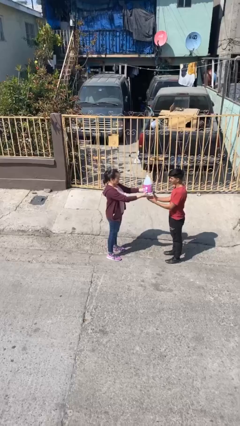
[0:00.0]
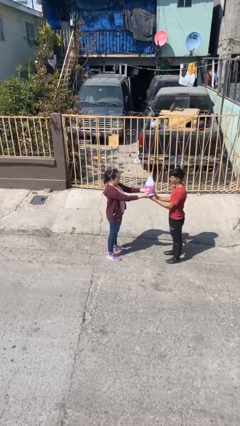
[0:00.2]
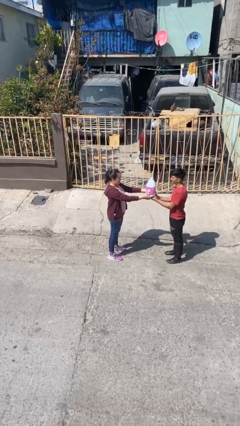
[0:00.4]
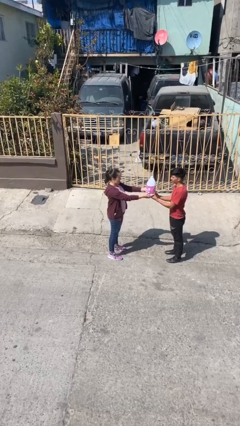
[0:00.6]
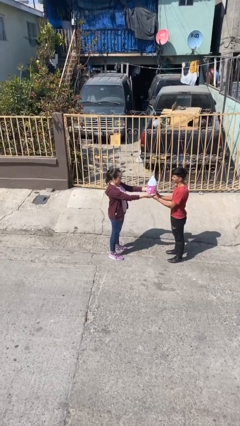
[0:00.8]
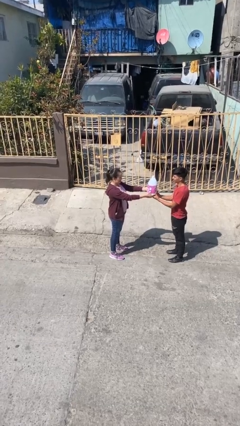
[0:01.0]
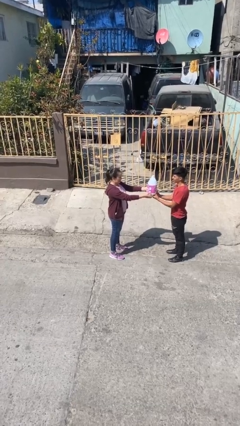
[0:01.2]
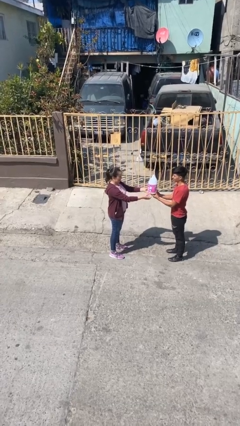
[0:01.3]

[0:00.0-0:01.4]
person transfers object to person

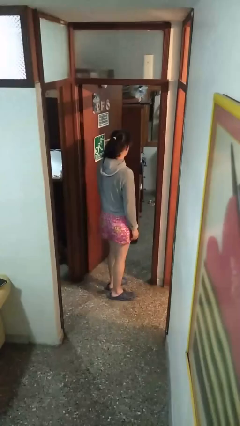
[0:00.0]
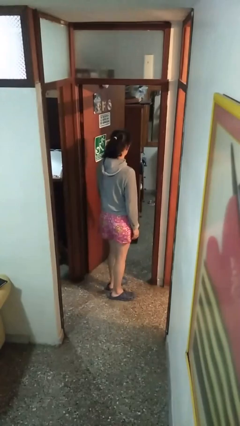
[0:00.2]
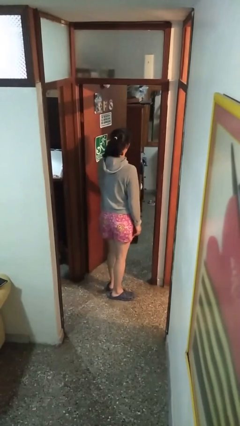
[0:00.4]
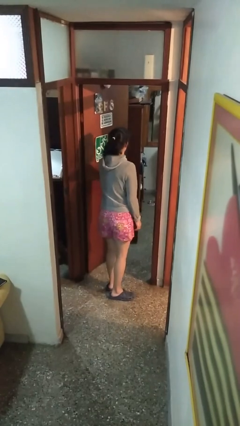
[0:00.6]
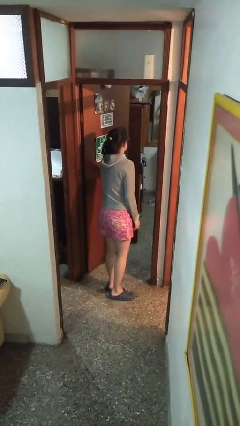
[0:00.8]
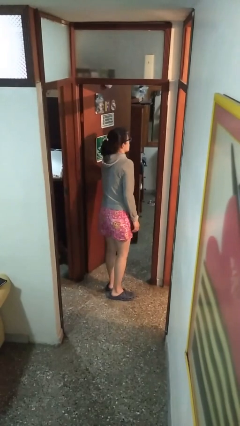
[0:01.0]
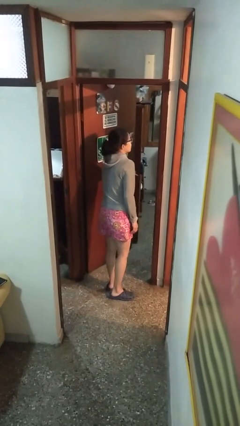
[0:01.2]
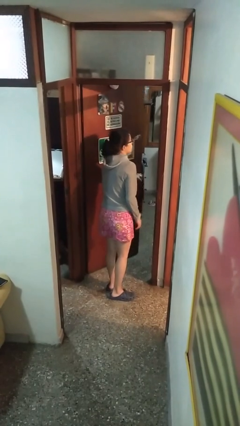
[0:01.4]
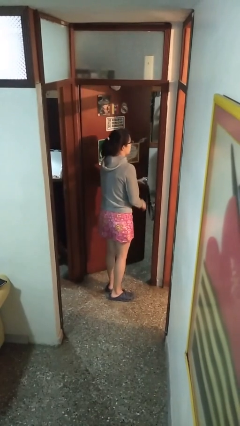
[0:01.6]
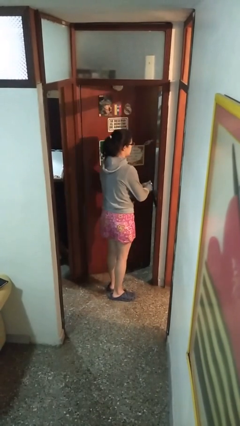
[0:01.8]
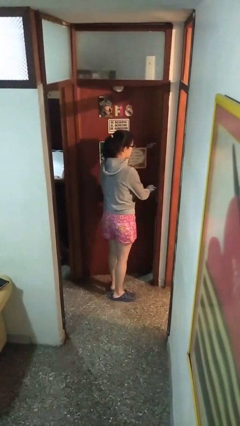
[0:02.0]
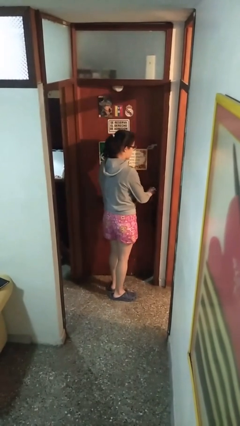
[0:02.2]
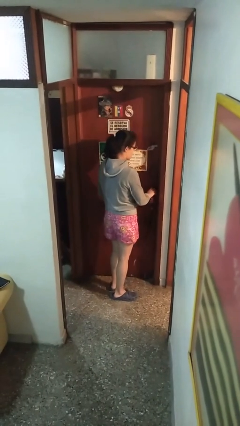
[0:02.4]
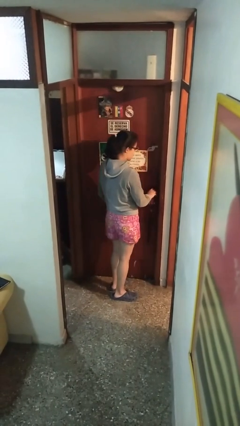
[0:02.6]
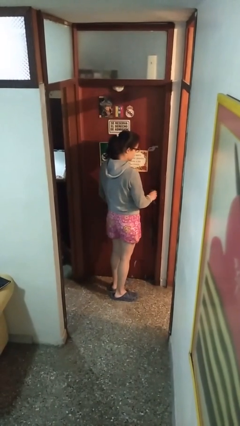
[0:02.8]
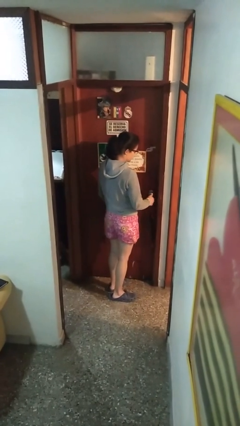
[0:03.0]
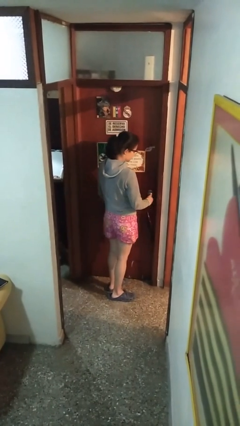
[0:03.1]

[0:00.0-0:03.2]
person closes facility door

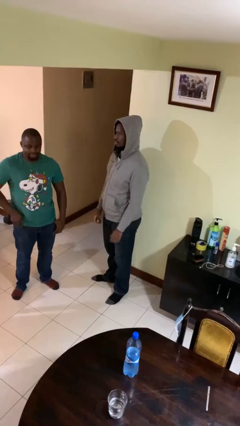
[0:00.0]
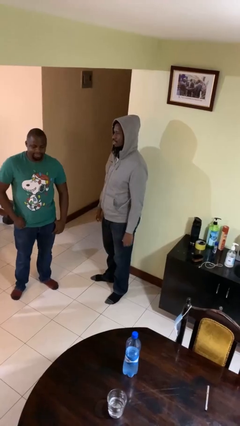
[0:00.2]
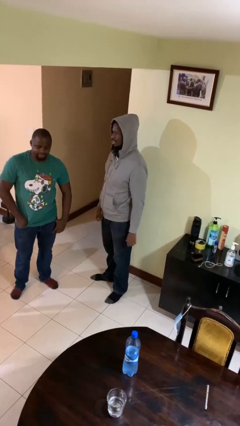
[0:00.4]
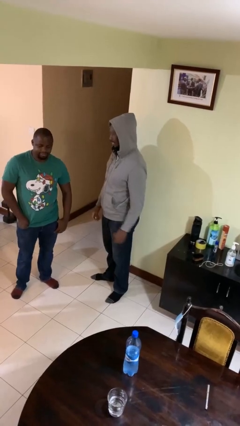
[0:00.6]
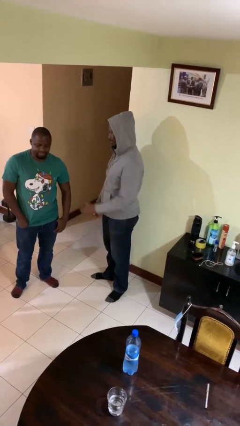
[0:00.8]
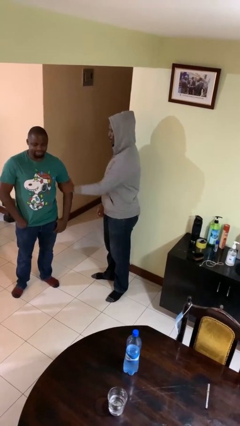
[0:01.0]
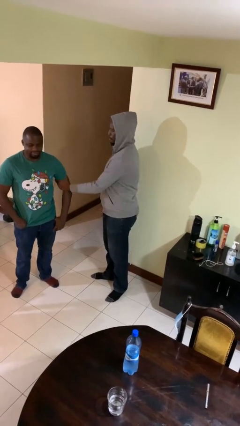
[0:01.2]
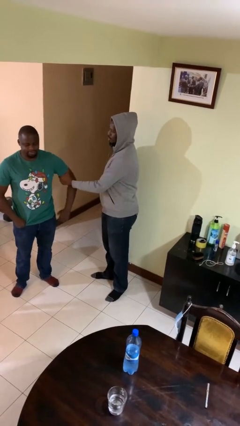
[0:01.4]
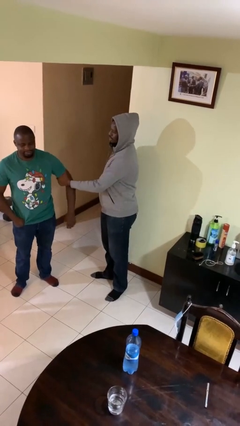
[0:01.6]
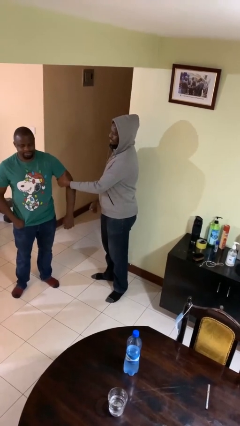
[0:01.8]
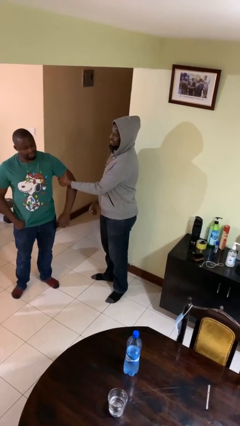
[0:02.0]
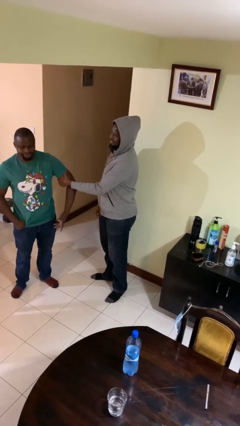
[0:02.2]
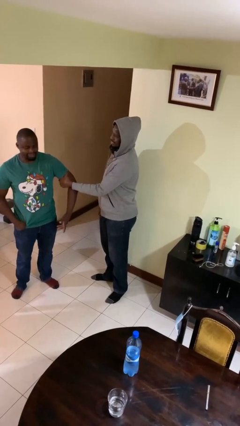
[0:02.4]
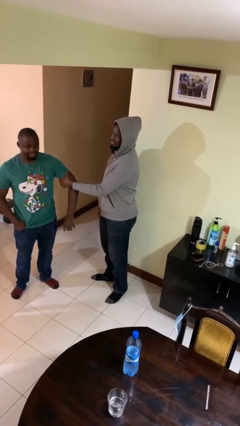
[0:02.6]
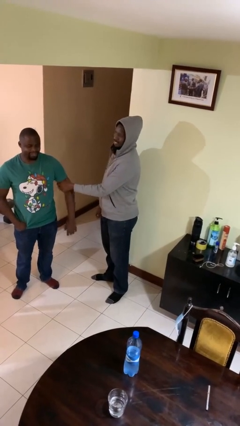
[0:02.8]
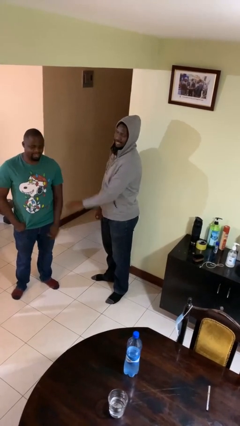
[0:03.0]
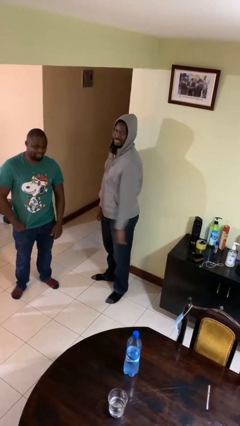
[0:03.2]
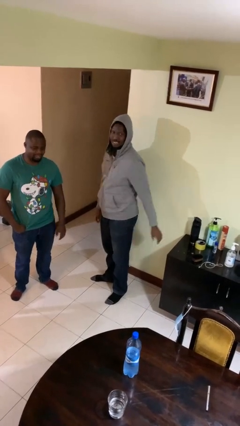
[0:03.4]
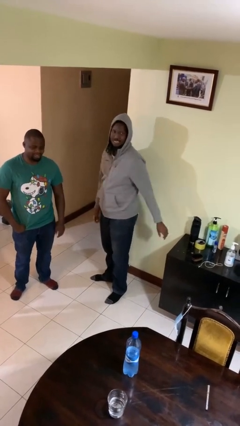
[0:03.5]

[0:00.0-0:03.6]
person grabs person by bicep

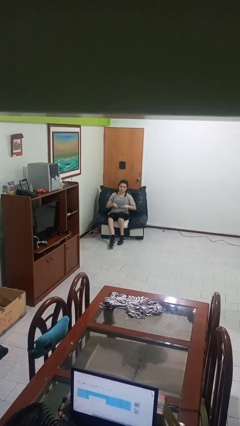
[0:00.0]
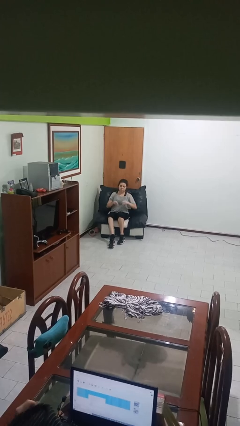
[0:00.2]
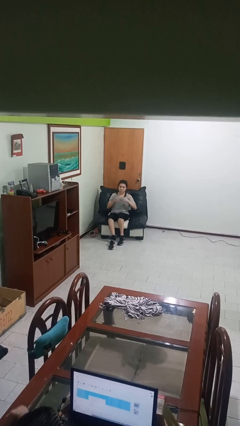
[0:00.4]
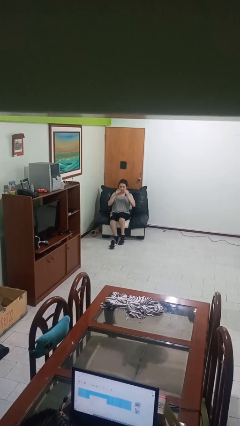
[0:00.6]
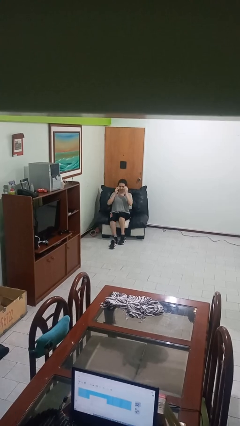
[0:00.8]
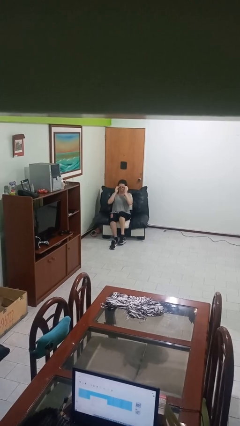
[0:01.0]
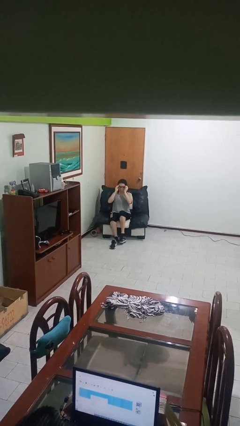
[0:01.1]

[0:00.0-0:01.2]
person puts on glasses

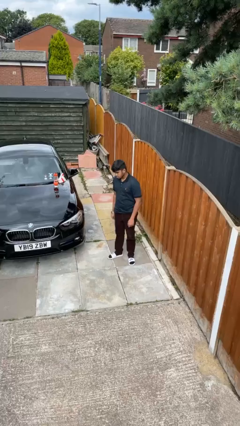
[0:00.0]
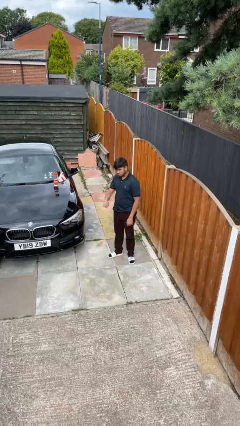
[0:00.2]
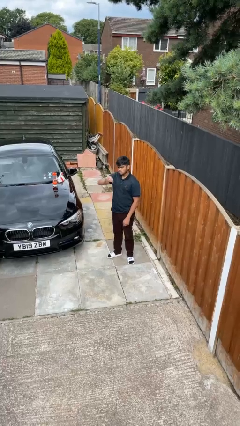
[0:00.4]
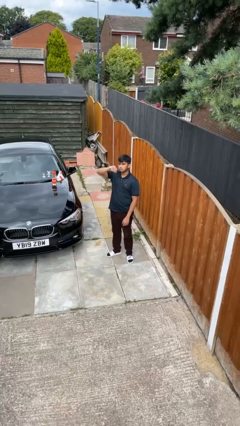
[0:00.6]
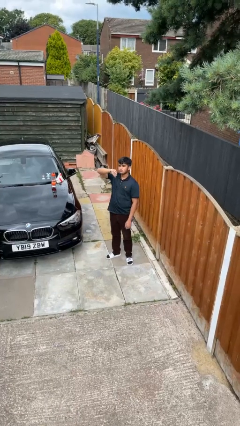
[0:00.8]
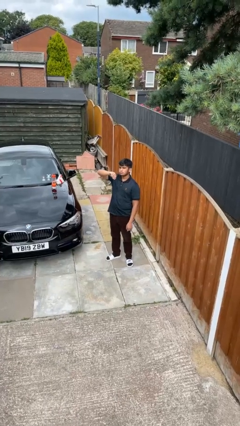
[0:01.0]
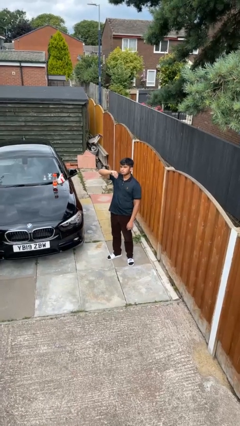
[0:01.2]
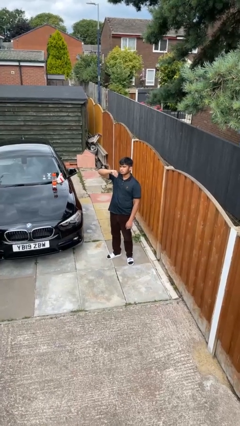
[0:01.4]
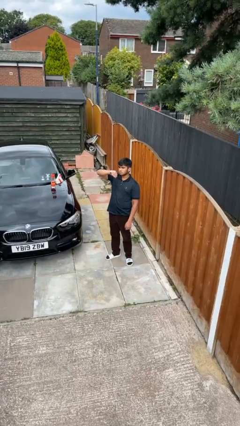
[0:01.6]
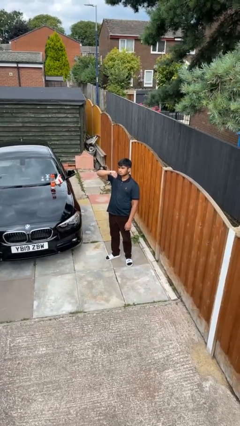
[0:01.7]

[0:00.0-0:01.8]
person looks at wristwatch

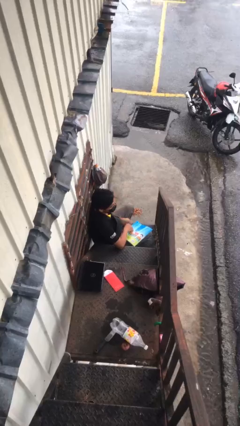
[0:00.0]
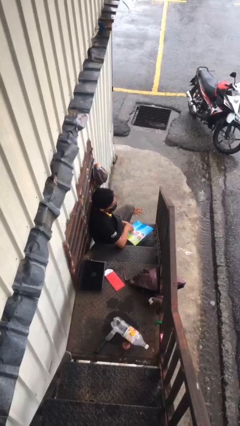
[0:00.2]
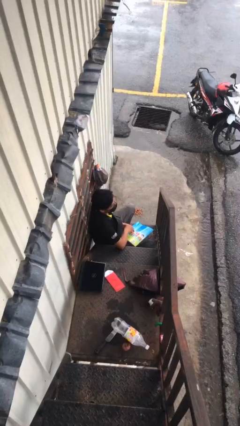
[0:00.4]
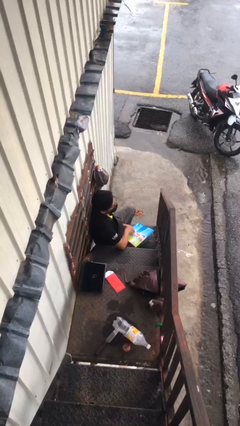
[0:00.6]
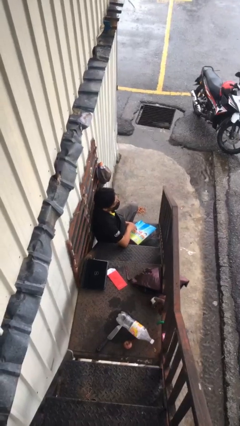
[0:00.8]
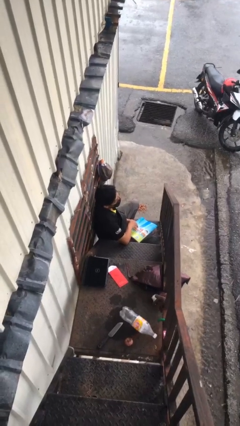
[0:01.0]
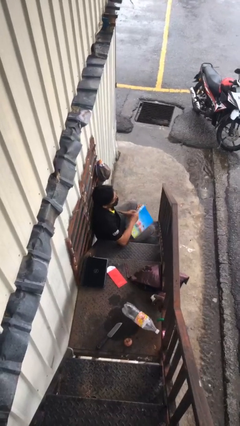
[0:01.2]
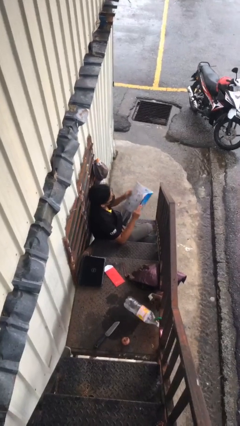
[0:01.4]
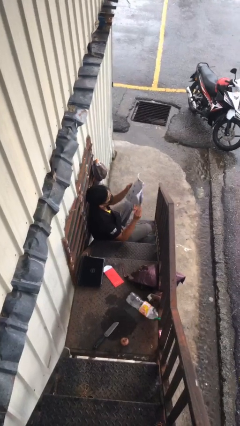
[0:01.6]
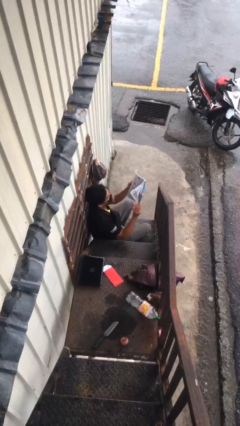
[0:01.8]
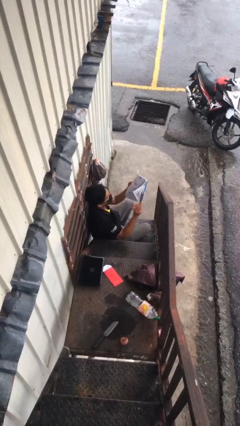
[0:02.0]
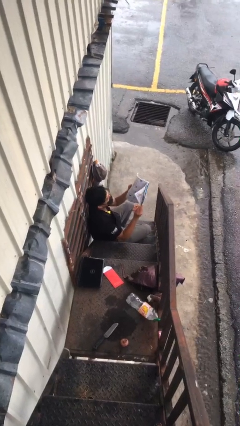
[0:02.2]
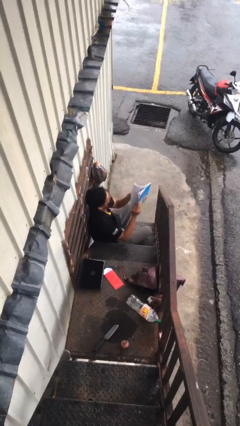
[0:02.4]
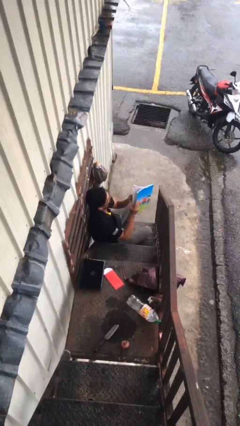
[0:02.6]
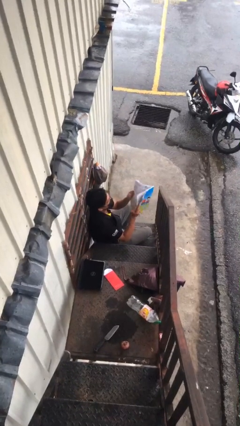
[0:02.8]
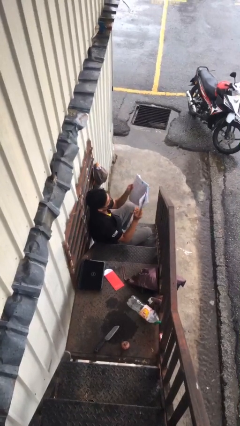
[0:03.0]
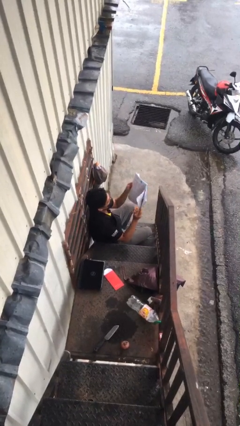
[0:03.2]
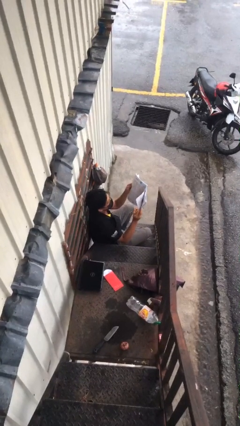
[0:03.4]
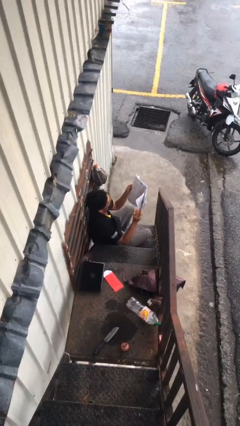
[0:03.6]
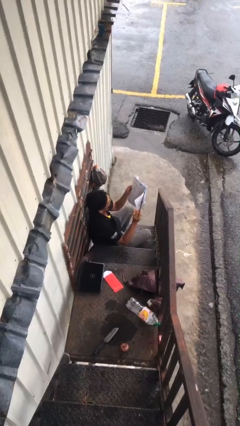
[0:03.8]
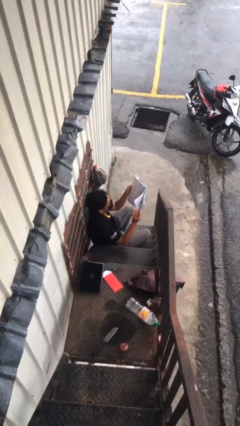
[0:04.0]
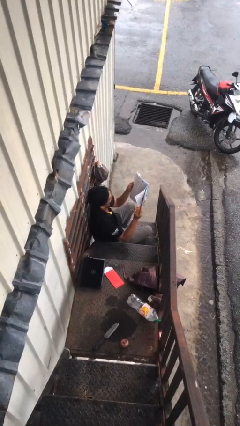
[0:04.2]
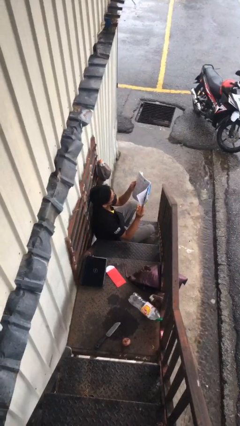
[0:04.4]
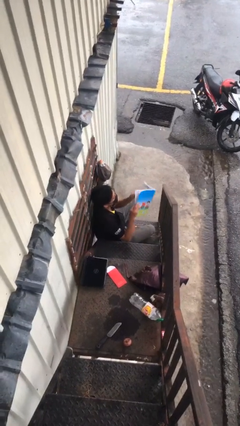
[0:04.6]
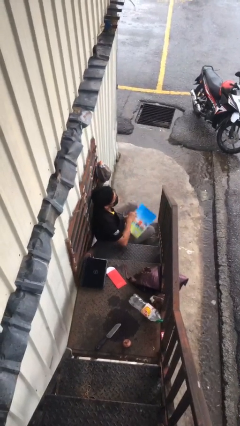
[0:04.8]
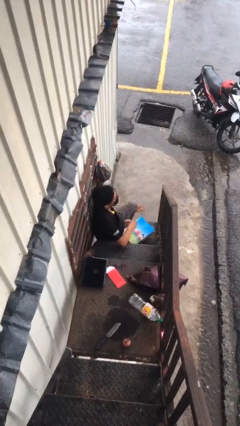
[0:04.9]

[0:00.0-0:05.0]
person reads document

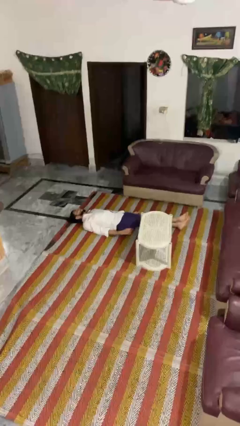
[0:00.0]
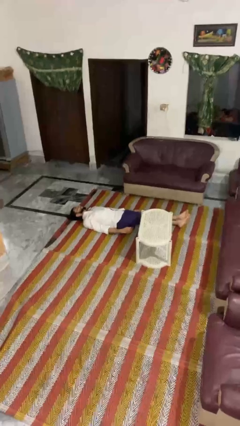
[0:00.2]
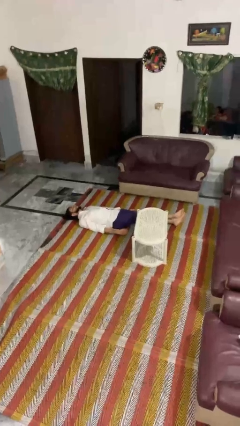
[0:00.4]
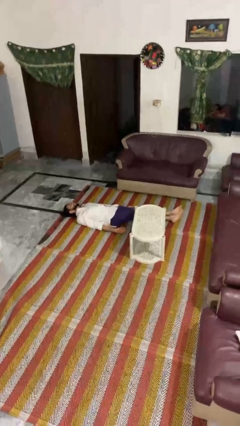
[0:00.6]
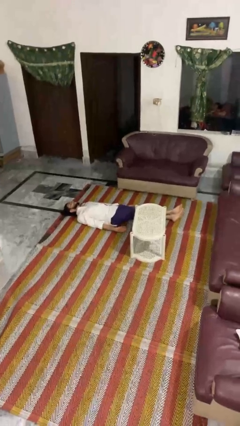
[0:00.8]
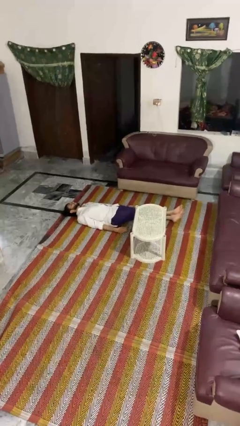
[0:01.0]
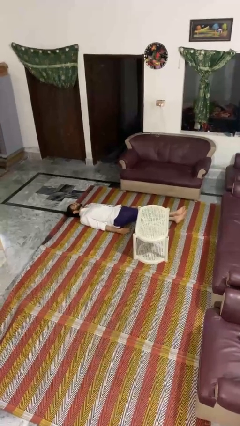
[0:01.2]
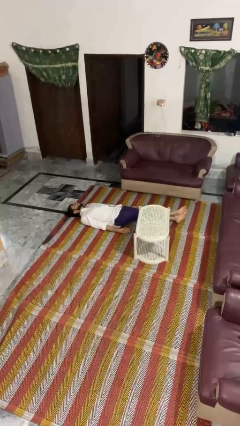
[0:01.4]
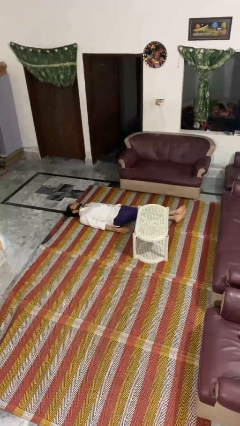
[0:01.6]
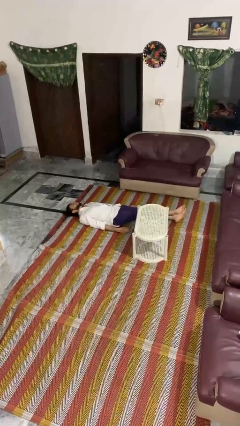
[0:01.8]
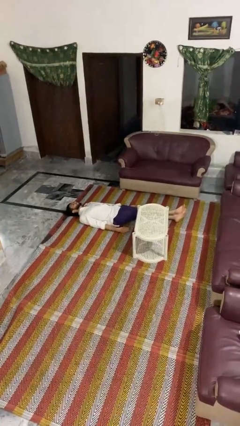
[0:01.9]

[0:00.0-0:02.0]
person lies down on floor
